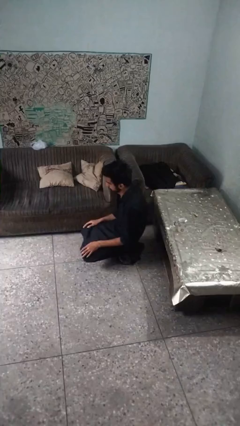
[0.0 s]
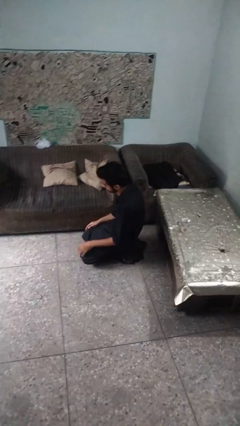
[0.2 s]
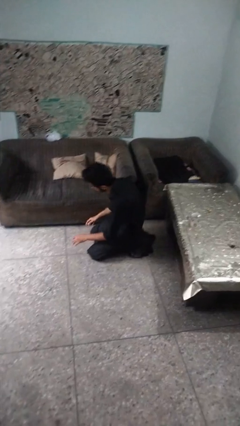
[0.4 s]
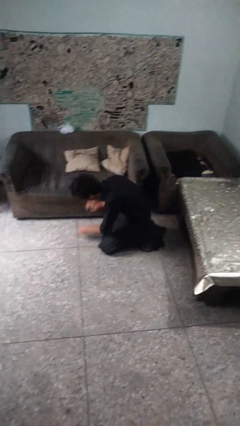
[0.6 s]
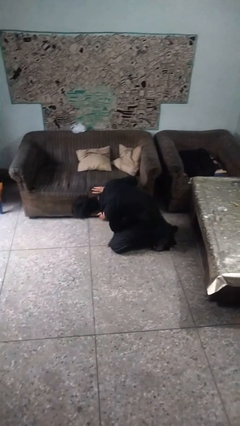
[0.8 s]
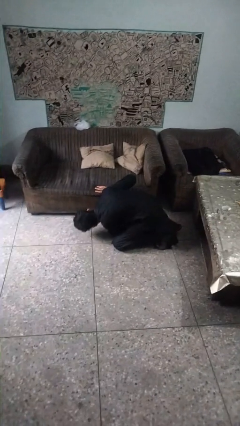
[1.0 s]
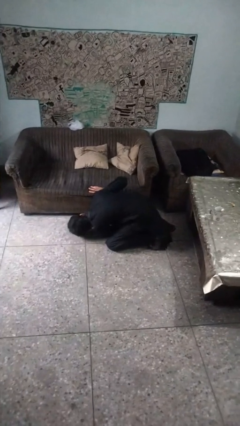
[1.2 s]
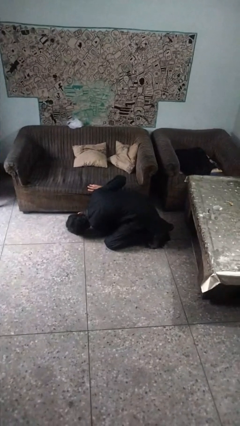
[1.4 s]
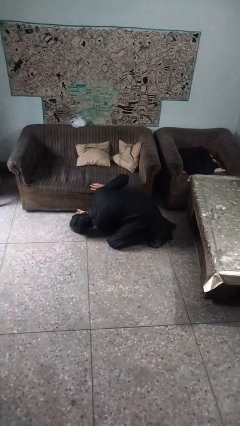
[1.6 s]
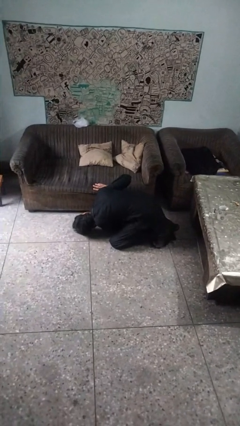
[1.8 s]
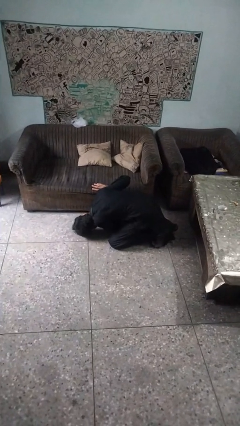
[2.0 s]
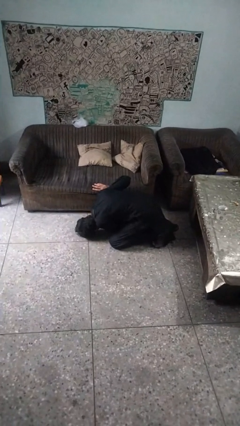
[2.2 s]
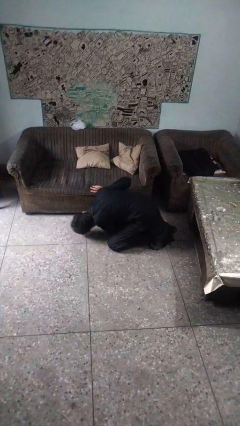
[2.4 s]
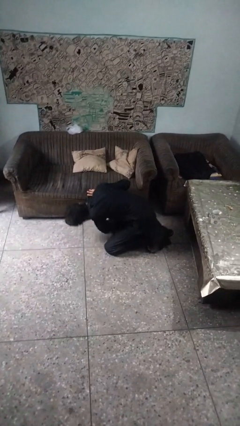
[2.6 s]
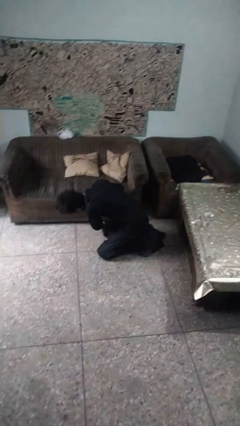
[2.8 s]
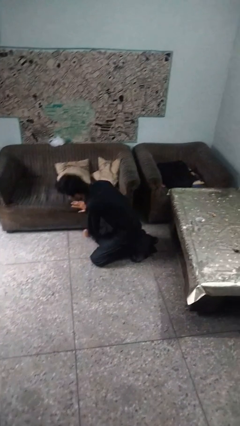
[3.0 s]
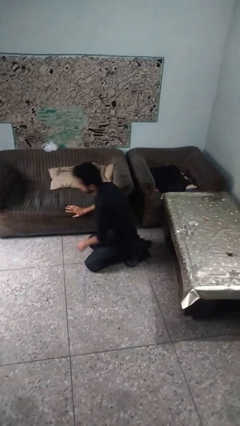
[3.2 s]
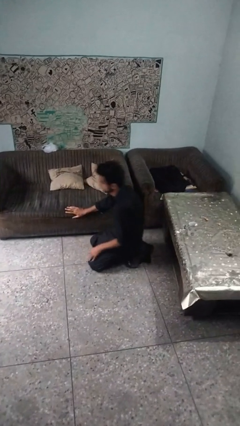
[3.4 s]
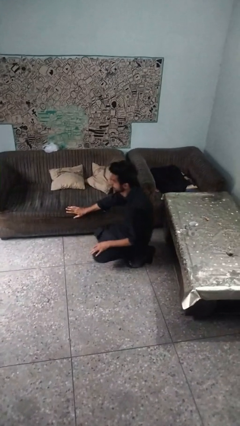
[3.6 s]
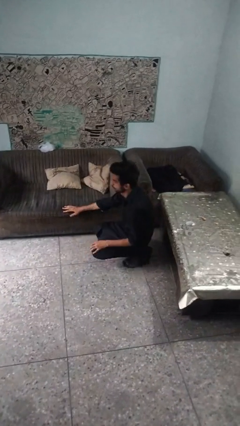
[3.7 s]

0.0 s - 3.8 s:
person searches under couch

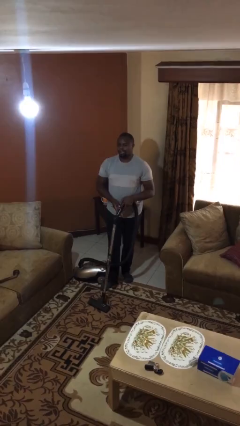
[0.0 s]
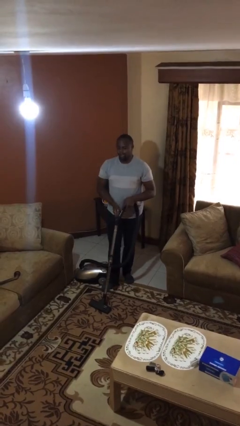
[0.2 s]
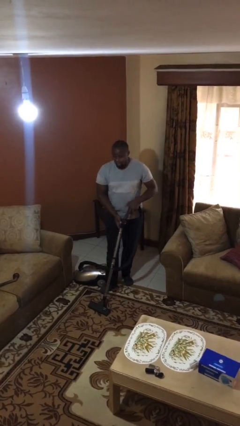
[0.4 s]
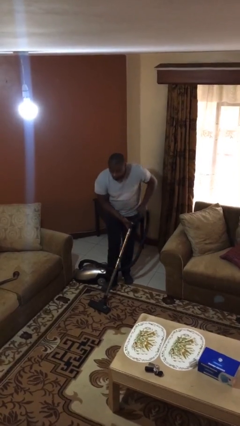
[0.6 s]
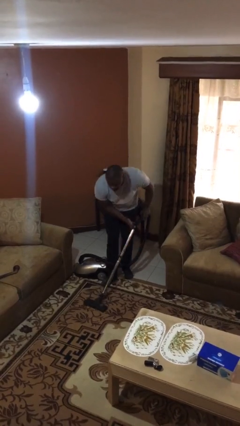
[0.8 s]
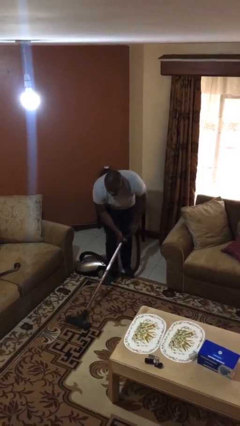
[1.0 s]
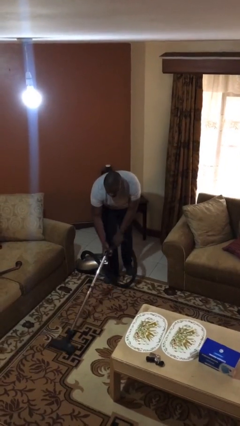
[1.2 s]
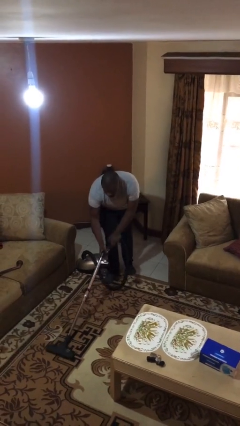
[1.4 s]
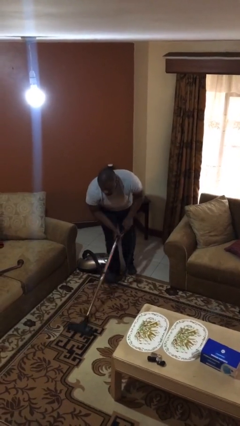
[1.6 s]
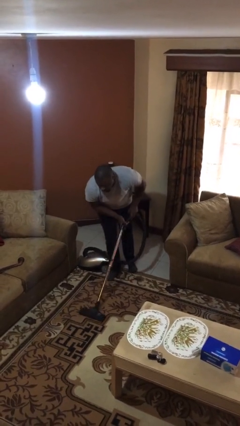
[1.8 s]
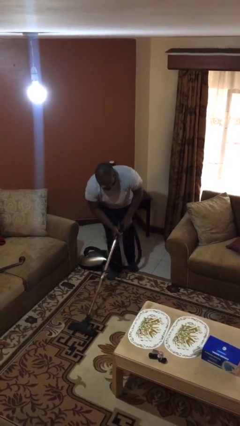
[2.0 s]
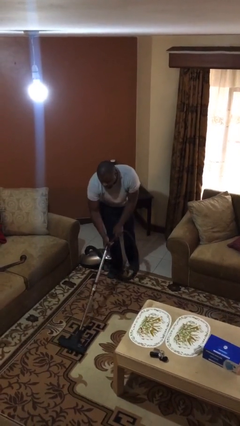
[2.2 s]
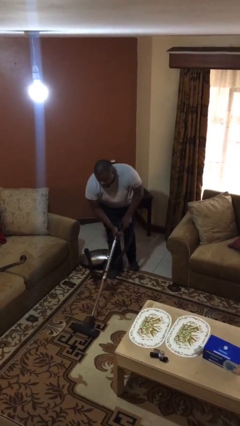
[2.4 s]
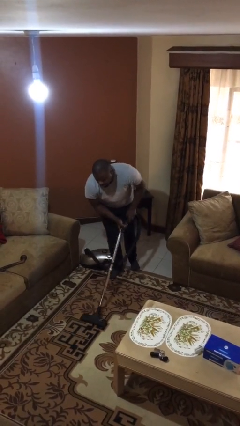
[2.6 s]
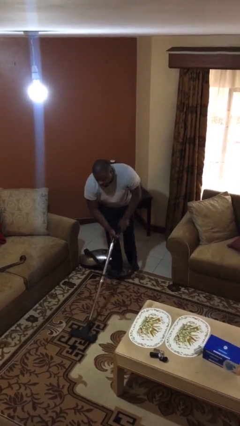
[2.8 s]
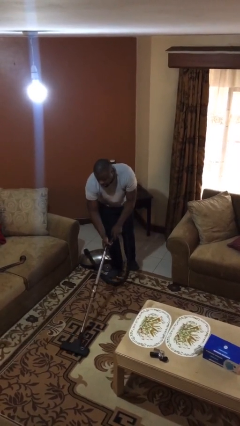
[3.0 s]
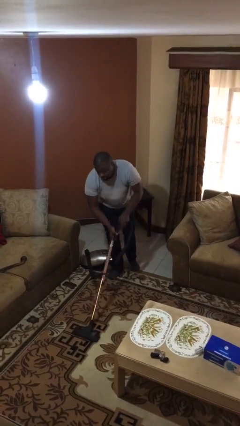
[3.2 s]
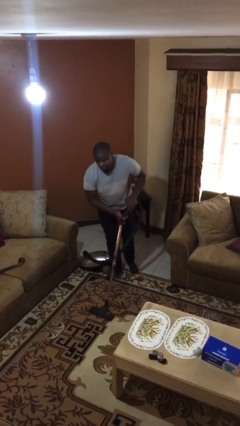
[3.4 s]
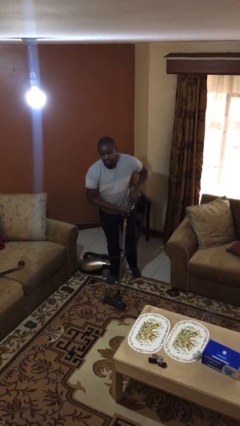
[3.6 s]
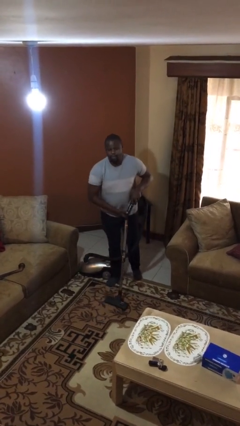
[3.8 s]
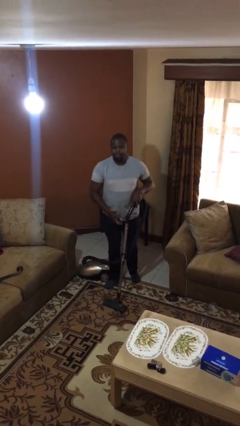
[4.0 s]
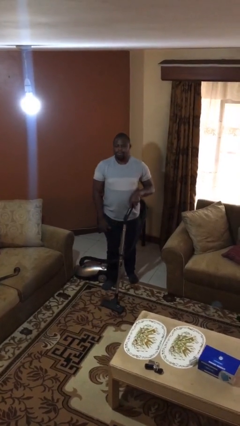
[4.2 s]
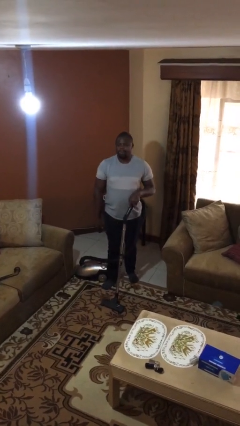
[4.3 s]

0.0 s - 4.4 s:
person vacuums carpet

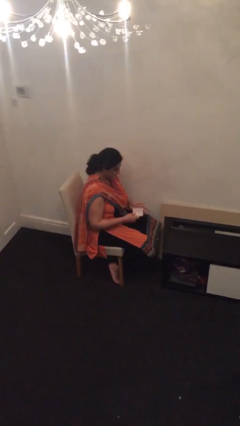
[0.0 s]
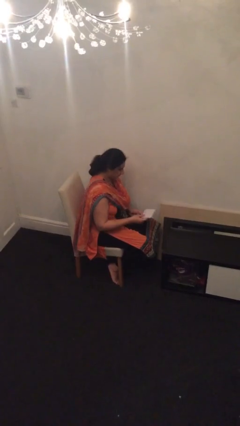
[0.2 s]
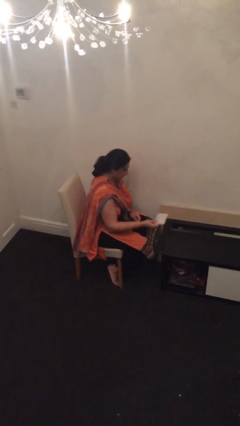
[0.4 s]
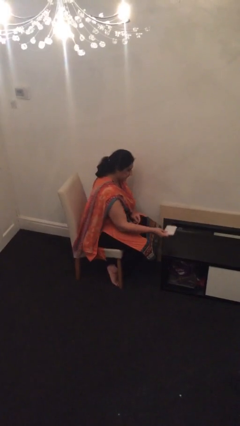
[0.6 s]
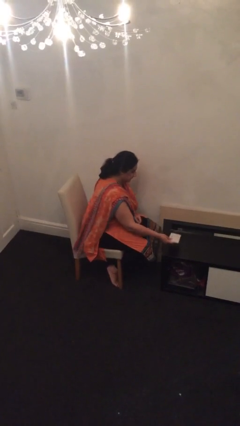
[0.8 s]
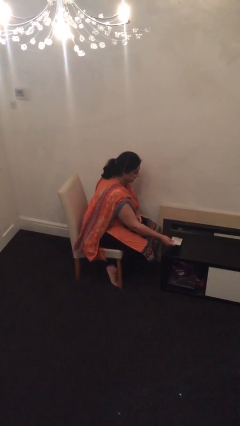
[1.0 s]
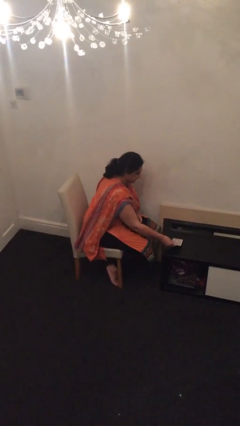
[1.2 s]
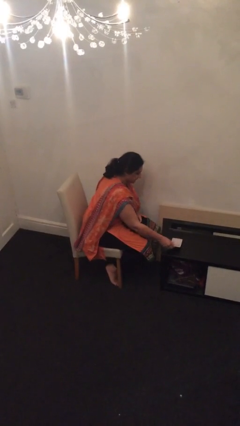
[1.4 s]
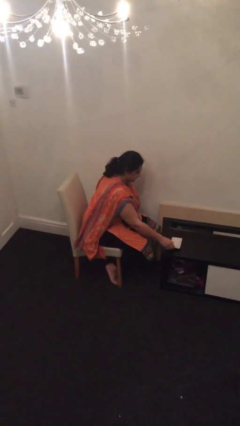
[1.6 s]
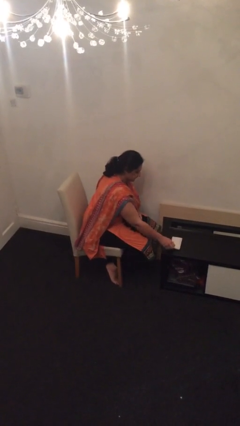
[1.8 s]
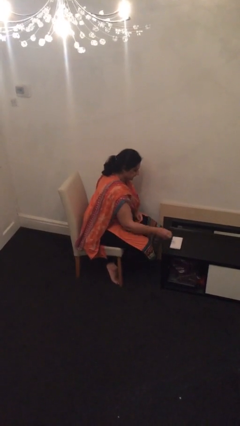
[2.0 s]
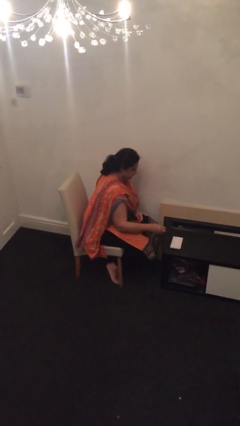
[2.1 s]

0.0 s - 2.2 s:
person puts down object on table

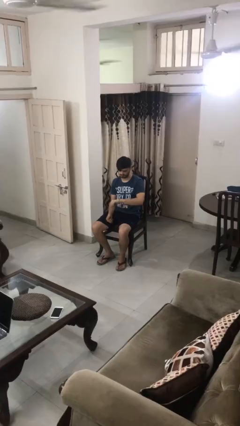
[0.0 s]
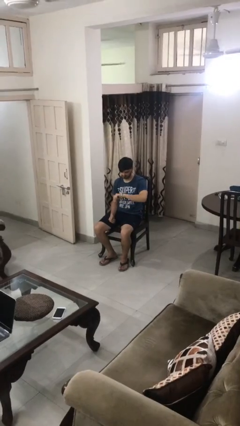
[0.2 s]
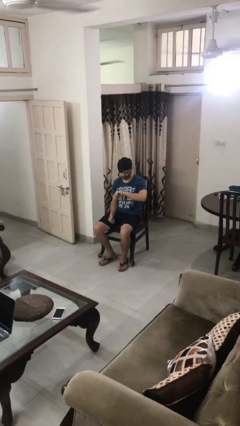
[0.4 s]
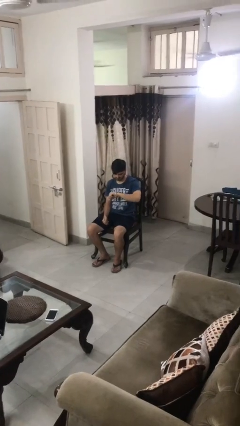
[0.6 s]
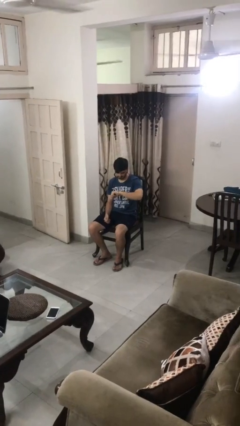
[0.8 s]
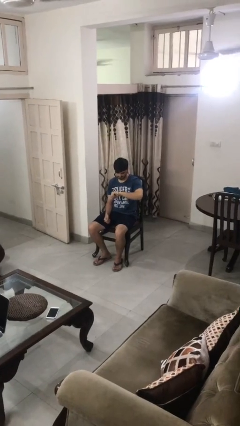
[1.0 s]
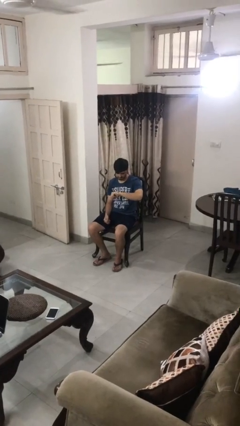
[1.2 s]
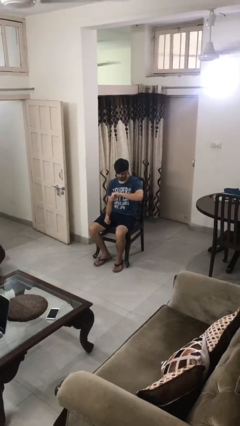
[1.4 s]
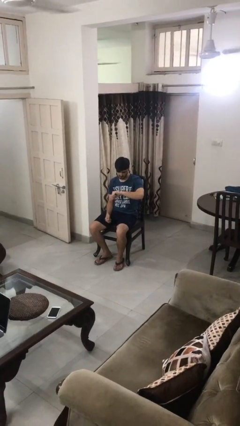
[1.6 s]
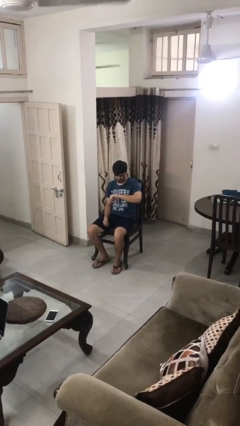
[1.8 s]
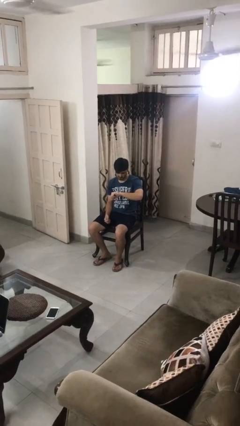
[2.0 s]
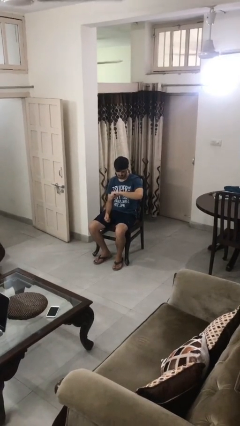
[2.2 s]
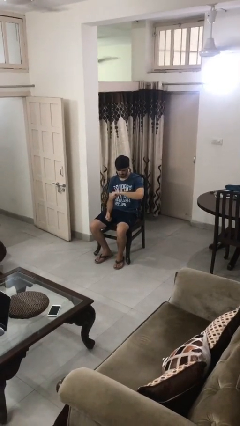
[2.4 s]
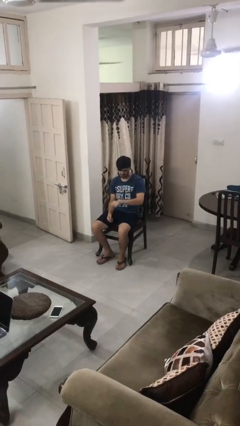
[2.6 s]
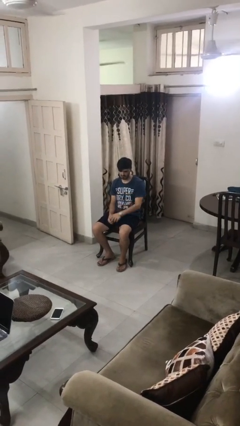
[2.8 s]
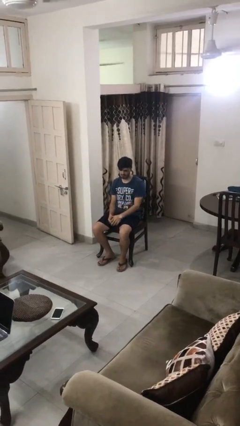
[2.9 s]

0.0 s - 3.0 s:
person looks at wristwatch

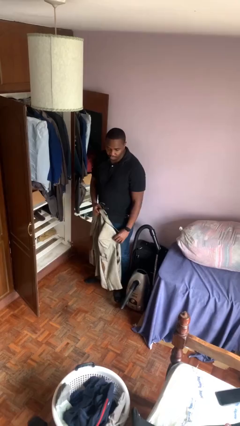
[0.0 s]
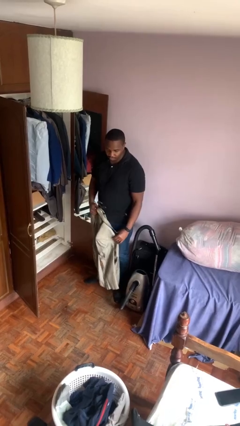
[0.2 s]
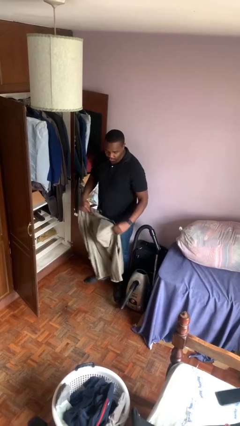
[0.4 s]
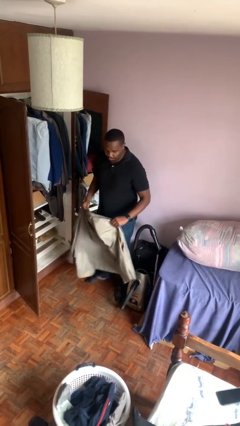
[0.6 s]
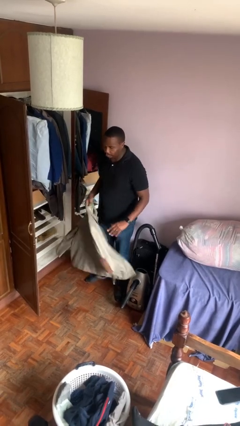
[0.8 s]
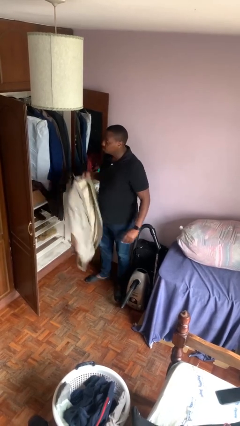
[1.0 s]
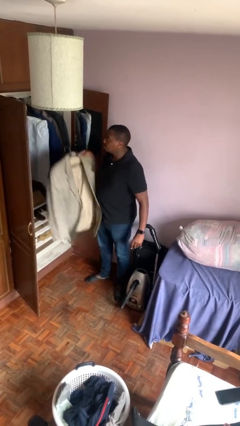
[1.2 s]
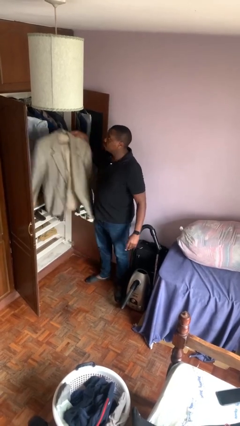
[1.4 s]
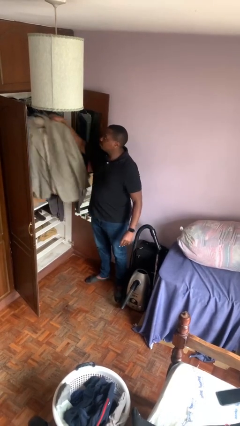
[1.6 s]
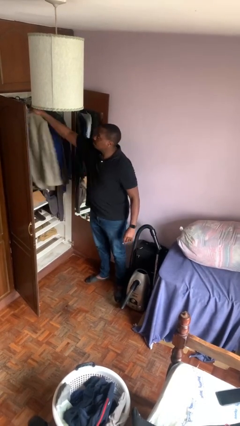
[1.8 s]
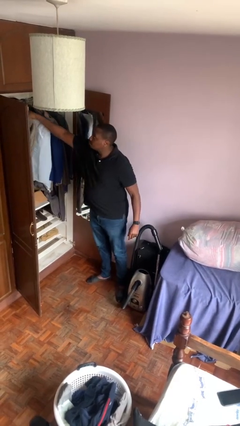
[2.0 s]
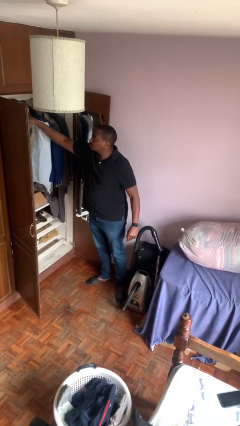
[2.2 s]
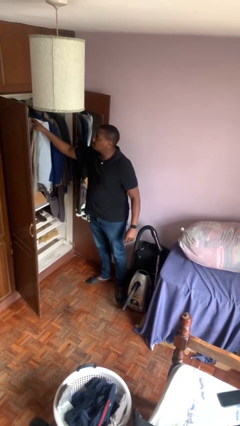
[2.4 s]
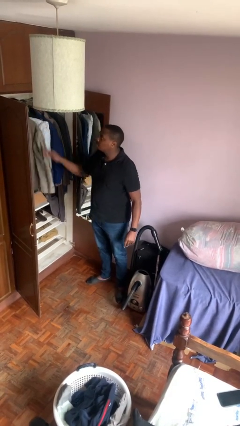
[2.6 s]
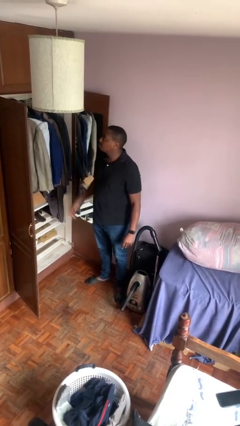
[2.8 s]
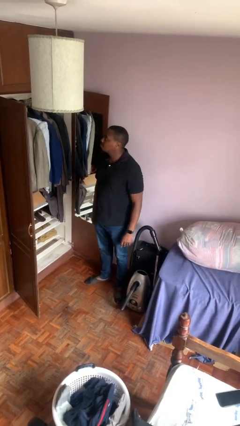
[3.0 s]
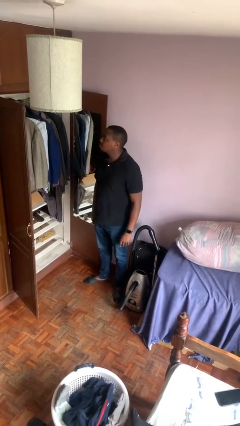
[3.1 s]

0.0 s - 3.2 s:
person puts clothes into closet

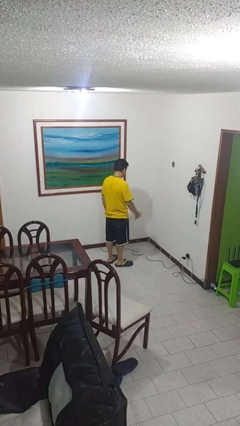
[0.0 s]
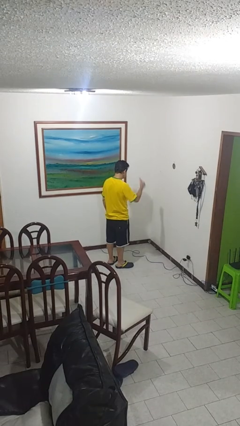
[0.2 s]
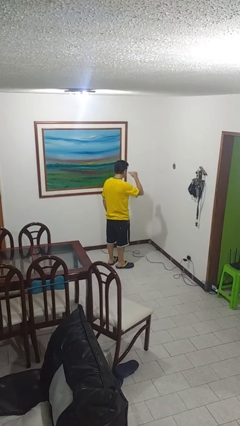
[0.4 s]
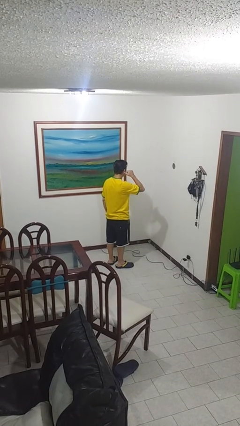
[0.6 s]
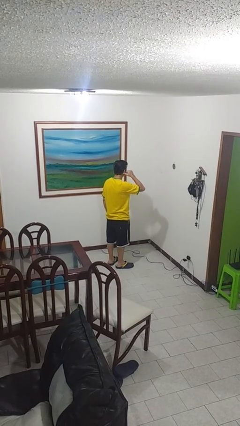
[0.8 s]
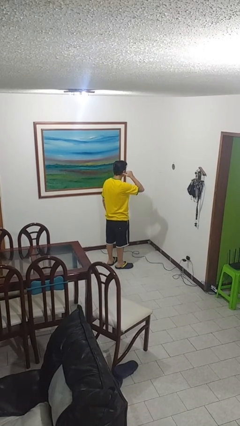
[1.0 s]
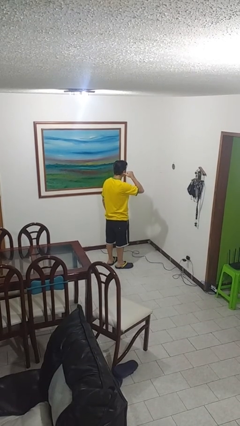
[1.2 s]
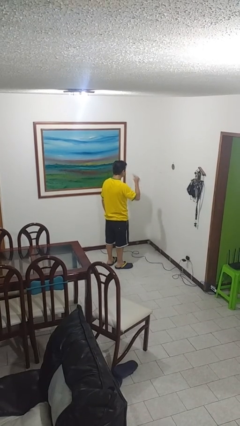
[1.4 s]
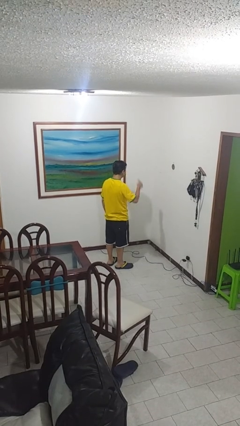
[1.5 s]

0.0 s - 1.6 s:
person gestures call me
